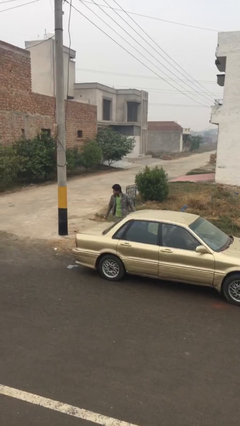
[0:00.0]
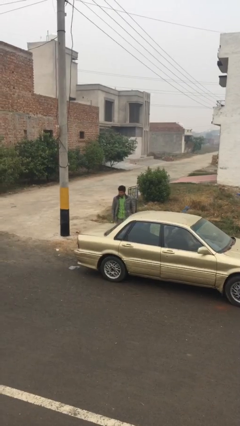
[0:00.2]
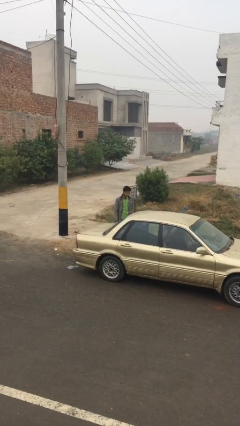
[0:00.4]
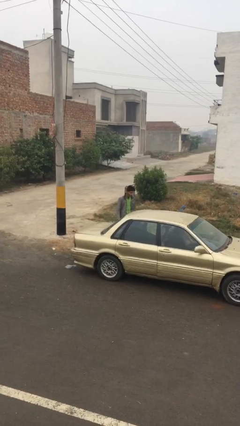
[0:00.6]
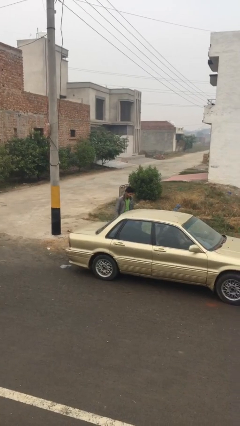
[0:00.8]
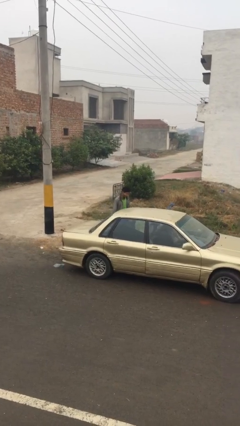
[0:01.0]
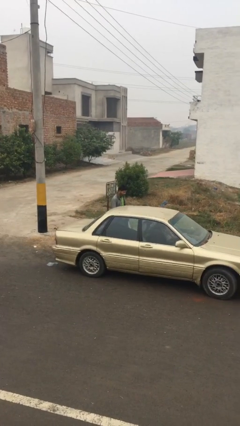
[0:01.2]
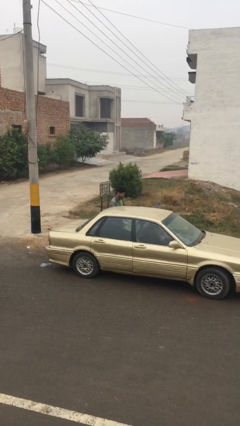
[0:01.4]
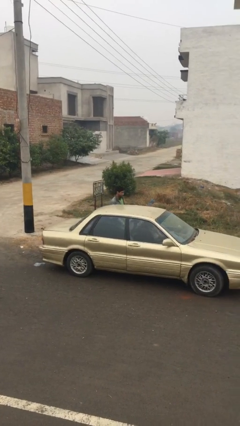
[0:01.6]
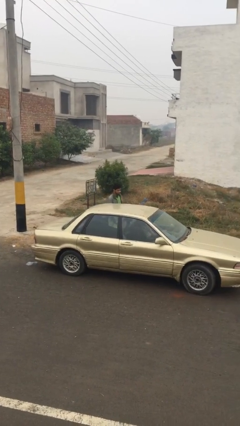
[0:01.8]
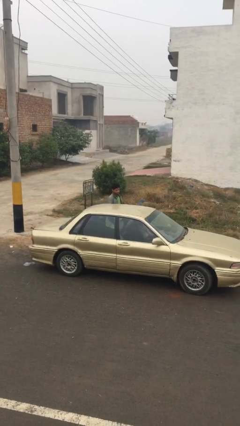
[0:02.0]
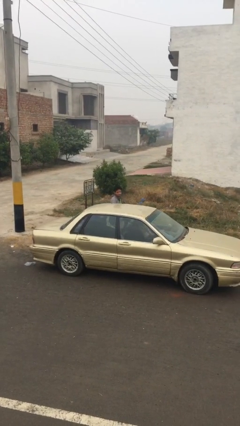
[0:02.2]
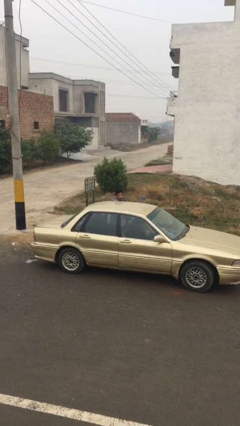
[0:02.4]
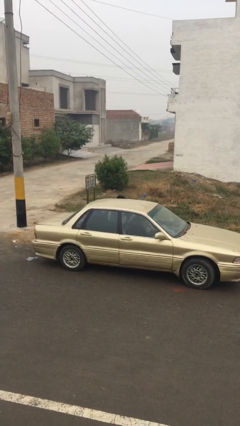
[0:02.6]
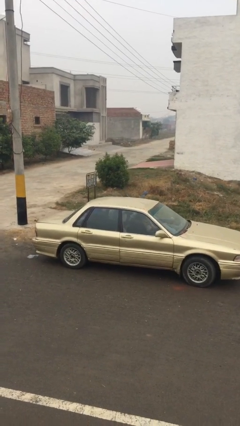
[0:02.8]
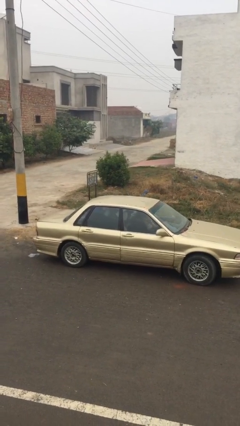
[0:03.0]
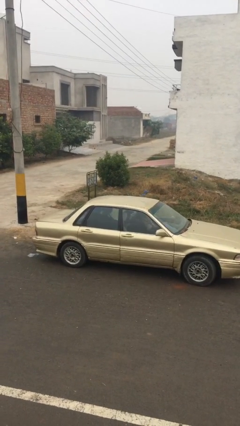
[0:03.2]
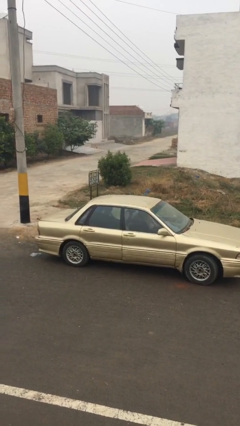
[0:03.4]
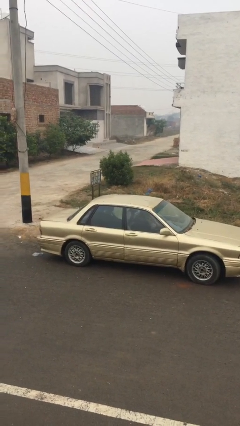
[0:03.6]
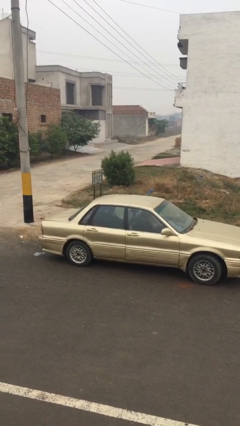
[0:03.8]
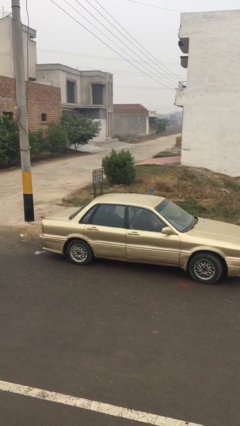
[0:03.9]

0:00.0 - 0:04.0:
person enters car

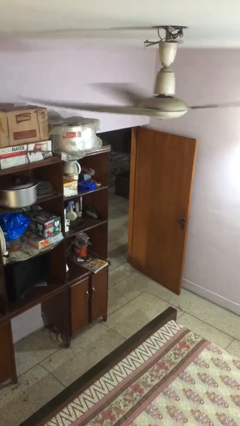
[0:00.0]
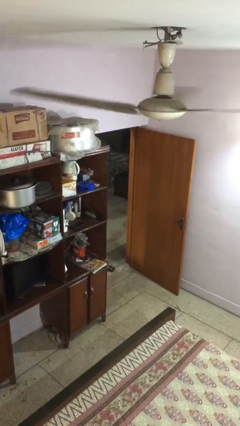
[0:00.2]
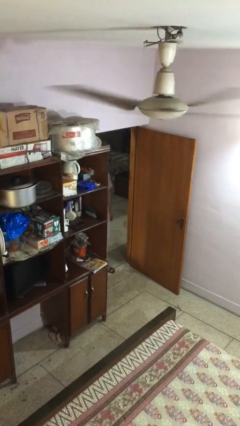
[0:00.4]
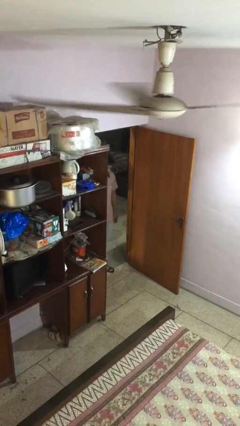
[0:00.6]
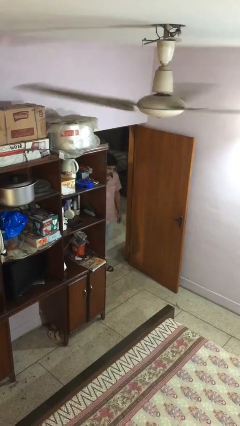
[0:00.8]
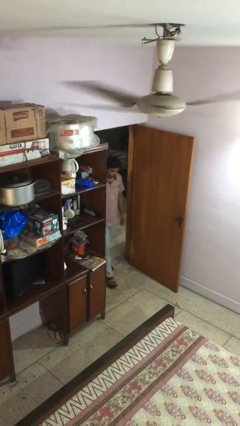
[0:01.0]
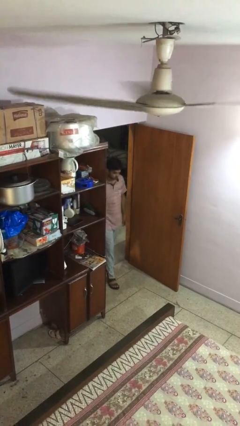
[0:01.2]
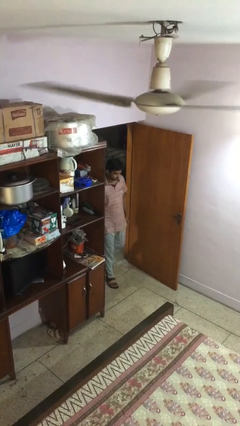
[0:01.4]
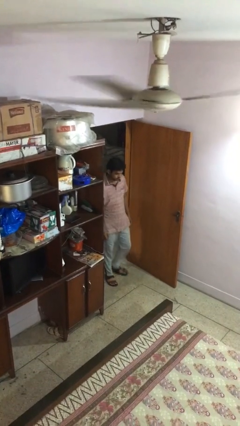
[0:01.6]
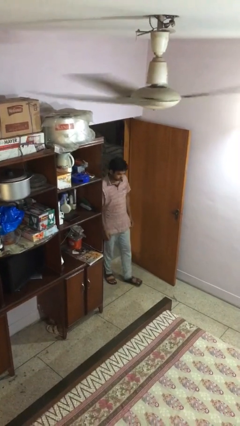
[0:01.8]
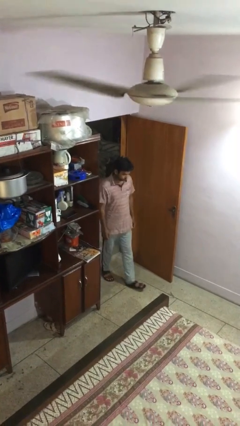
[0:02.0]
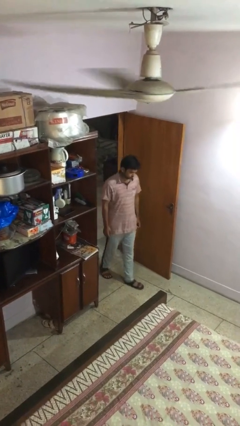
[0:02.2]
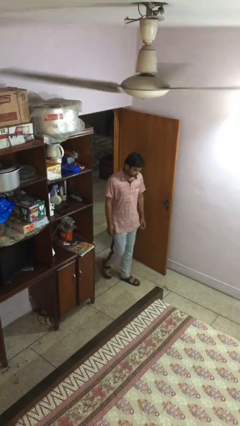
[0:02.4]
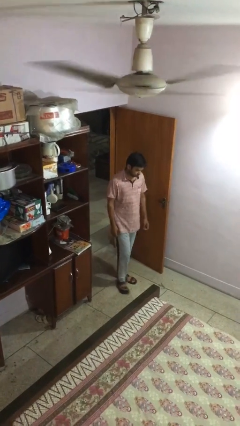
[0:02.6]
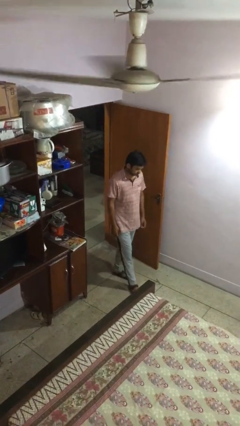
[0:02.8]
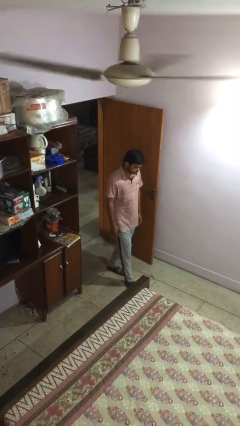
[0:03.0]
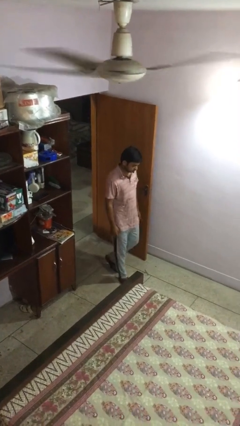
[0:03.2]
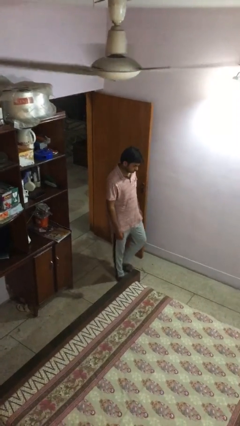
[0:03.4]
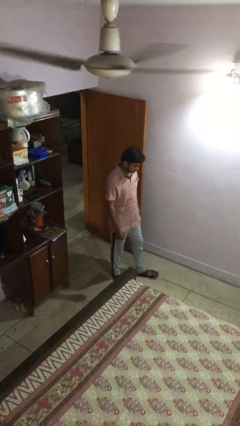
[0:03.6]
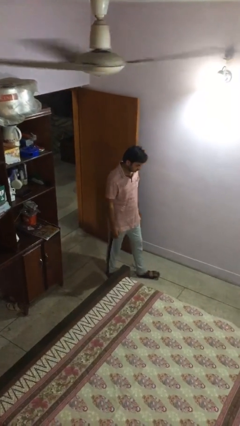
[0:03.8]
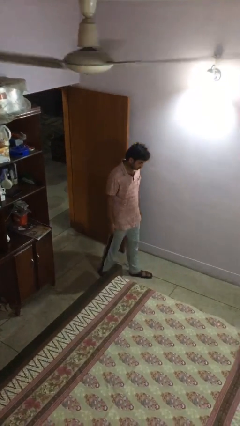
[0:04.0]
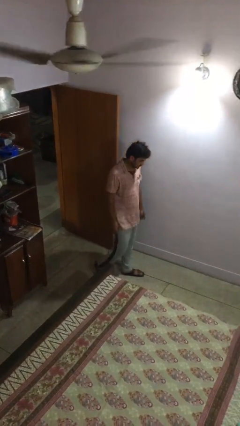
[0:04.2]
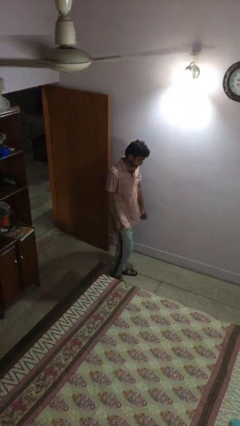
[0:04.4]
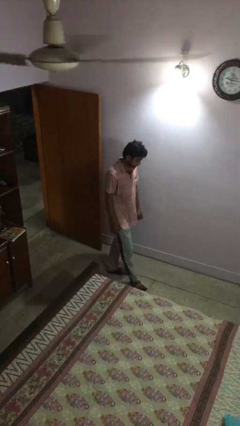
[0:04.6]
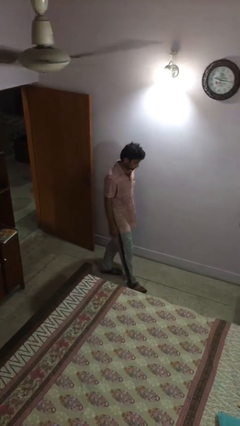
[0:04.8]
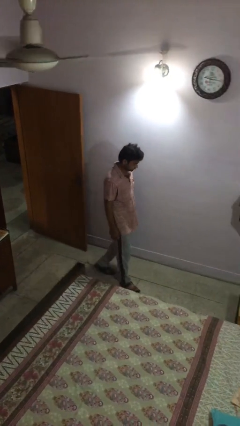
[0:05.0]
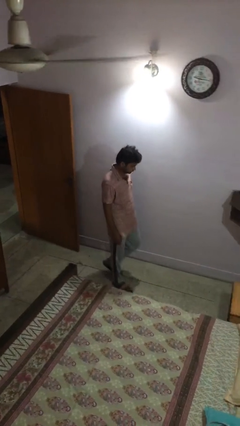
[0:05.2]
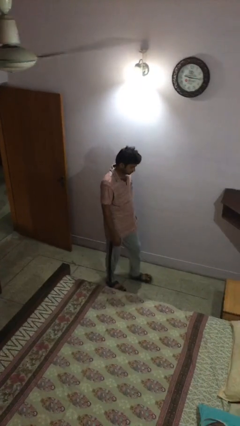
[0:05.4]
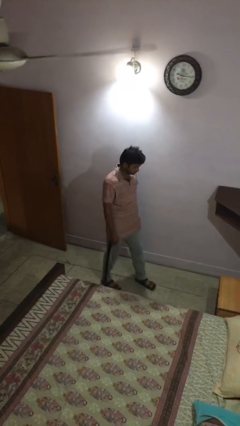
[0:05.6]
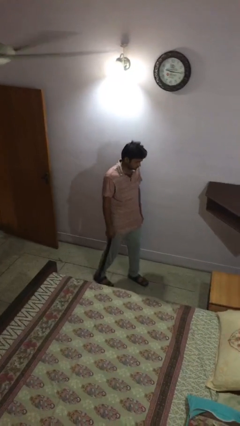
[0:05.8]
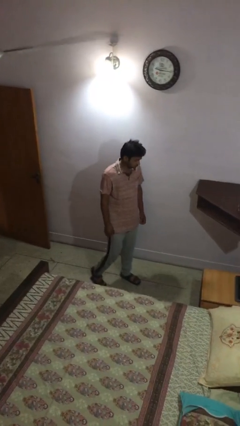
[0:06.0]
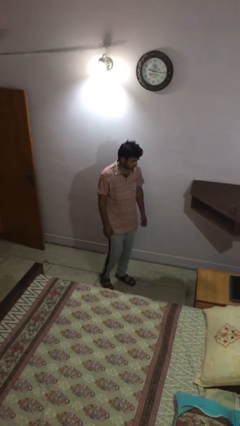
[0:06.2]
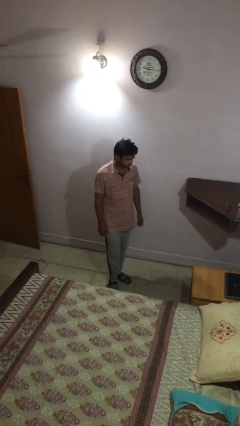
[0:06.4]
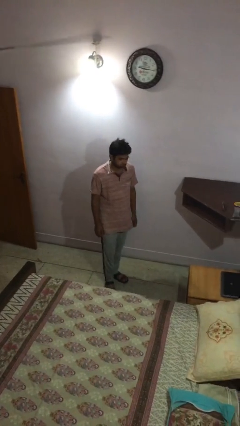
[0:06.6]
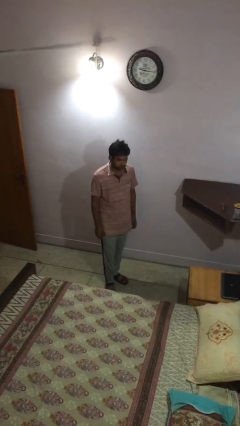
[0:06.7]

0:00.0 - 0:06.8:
person enters scene through structure

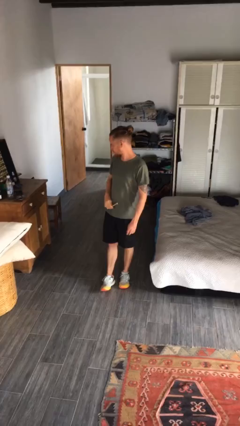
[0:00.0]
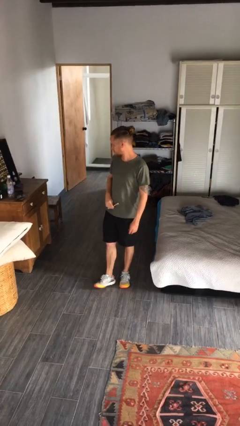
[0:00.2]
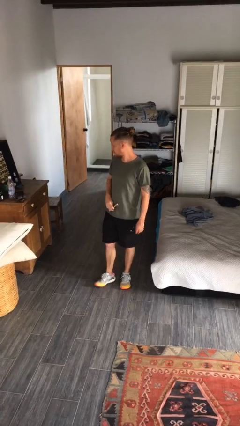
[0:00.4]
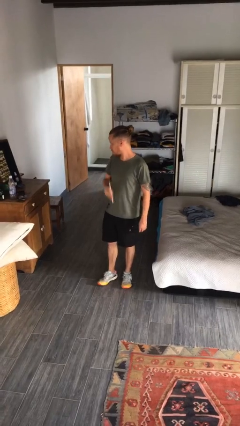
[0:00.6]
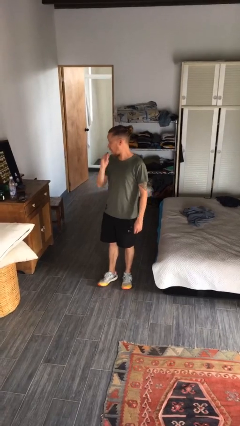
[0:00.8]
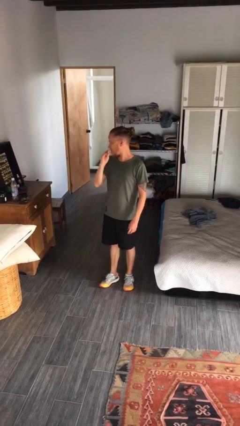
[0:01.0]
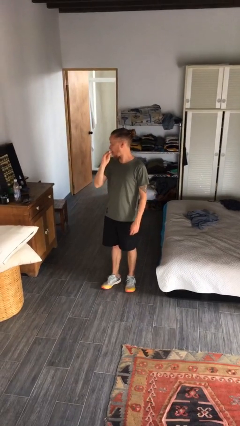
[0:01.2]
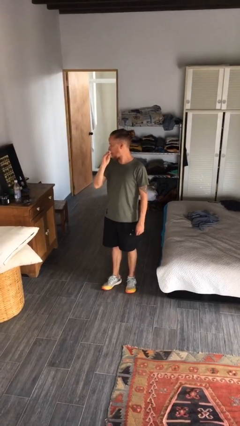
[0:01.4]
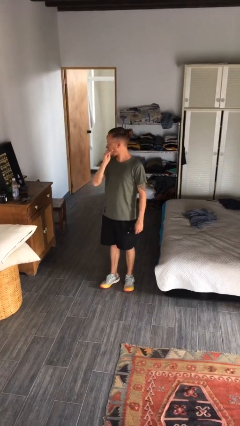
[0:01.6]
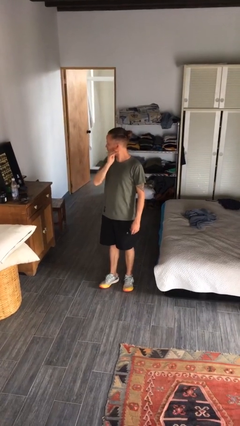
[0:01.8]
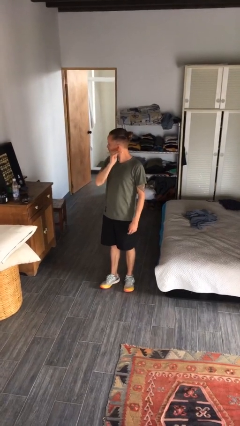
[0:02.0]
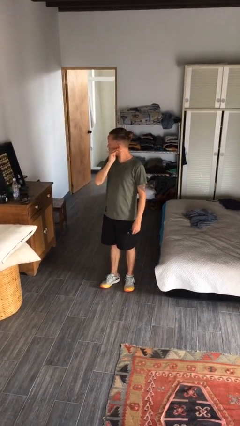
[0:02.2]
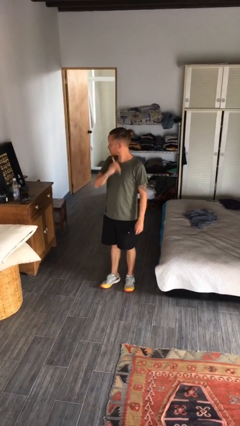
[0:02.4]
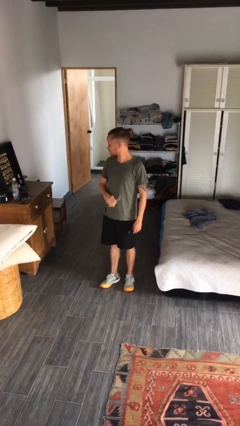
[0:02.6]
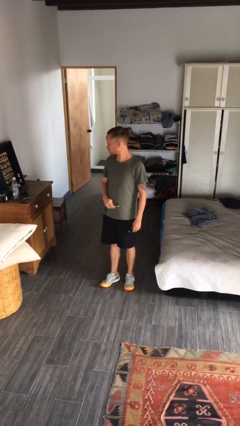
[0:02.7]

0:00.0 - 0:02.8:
person brushes teeth

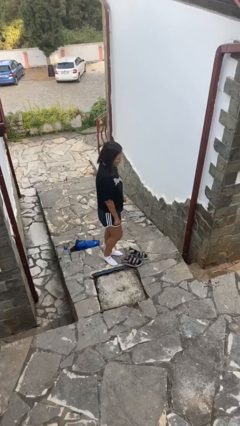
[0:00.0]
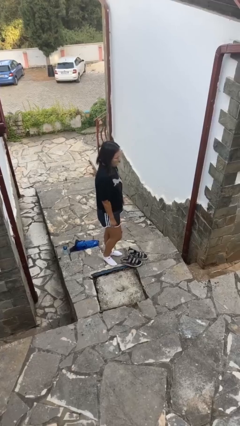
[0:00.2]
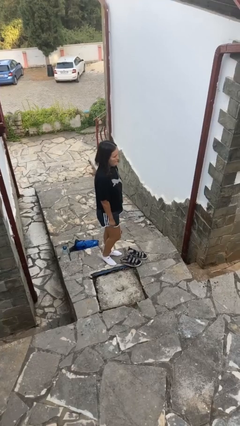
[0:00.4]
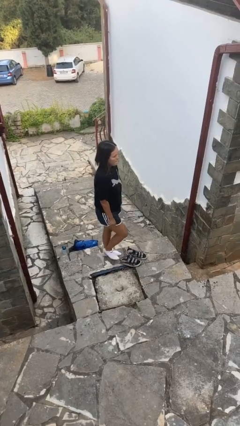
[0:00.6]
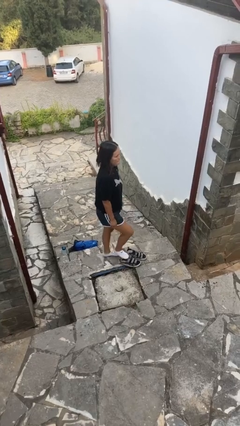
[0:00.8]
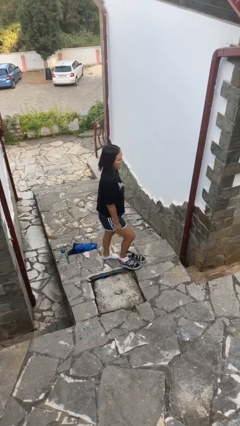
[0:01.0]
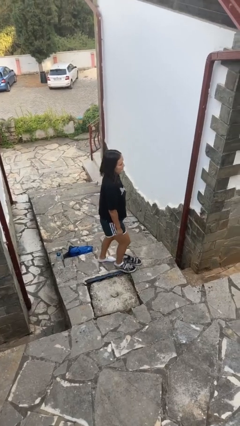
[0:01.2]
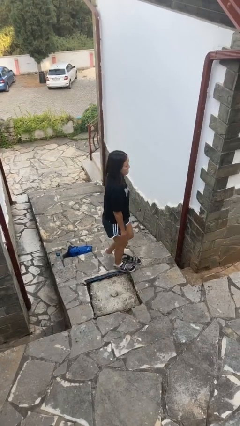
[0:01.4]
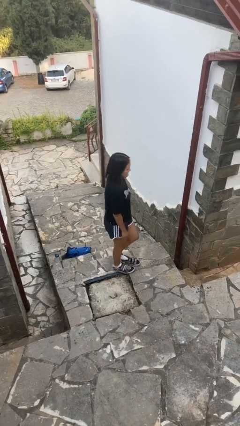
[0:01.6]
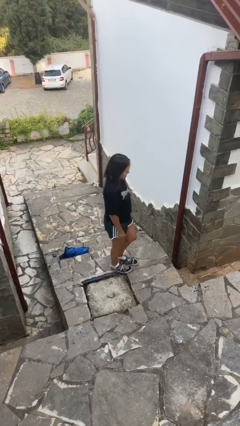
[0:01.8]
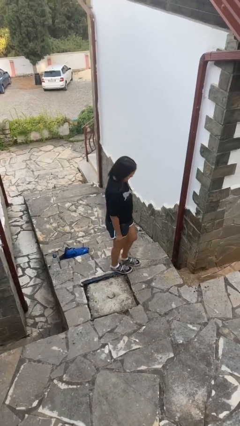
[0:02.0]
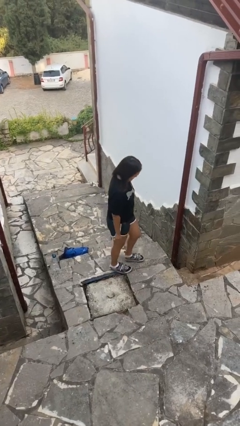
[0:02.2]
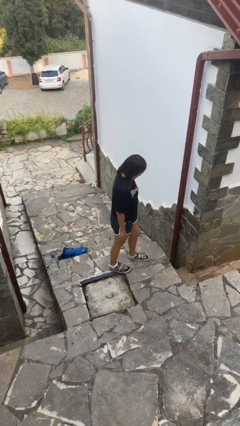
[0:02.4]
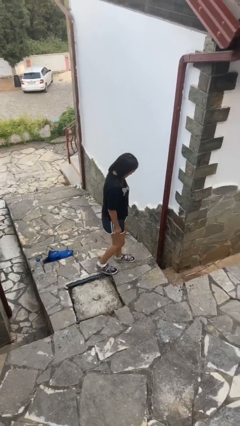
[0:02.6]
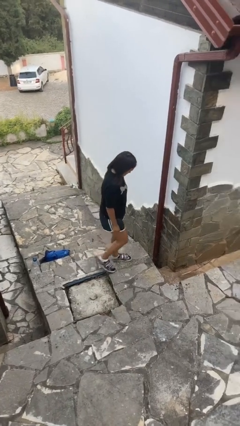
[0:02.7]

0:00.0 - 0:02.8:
person puts on shoes

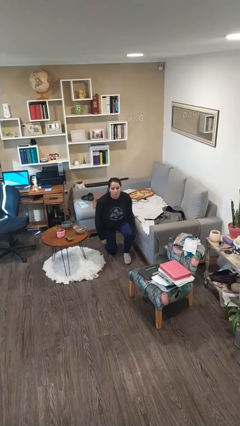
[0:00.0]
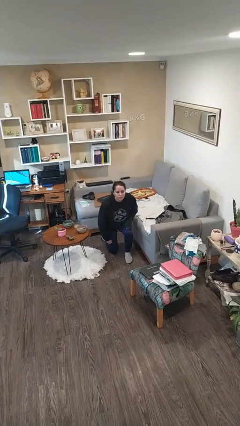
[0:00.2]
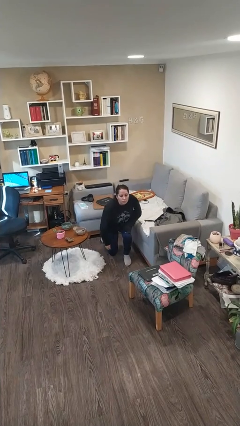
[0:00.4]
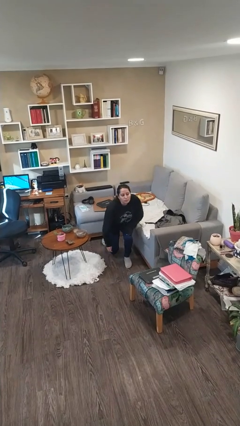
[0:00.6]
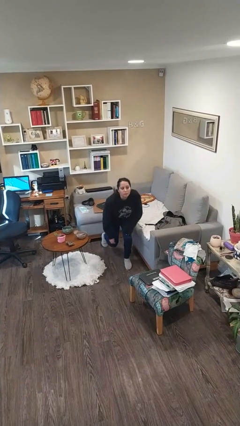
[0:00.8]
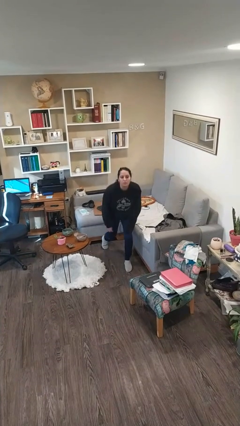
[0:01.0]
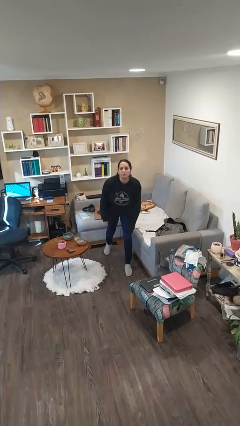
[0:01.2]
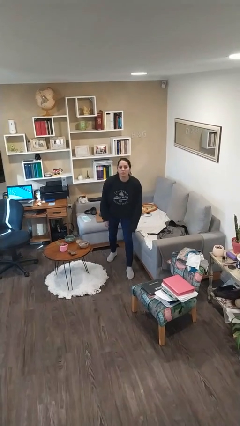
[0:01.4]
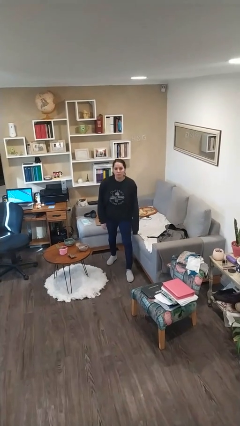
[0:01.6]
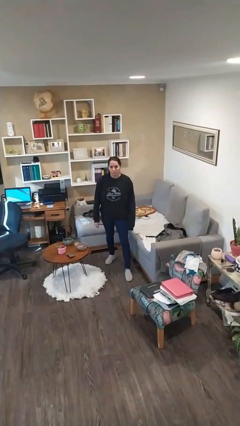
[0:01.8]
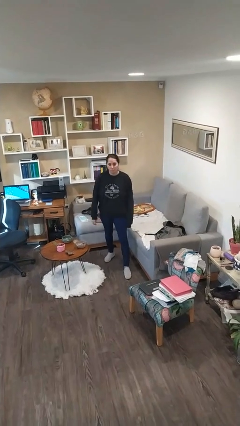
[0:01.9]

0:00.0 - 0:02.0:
person stands up from floor
